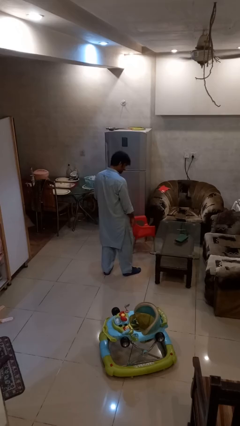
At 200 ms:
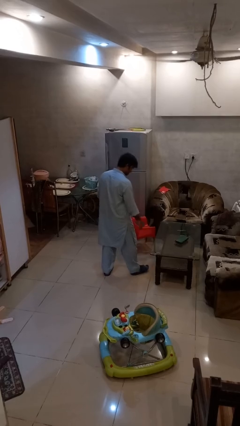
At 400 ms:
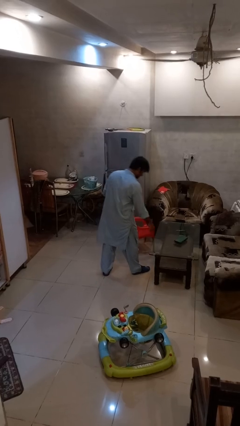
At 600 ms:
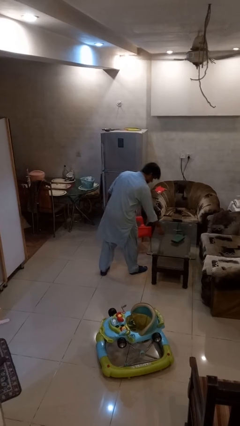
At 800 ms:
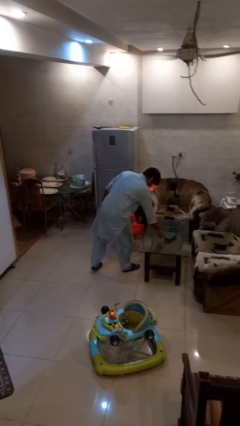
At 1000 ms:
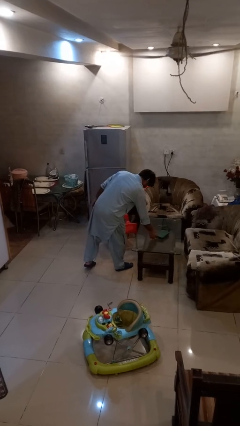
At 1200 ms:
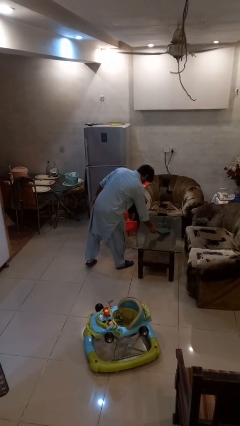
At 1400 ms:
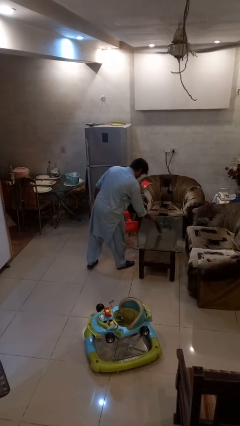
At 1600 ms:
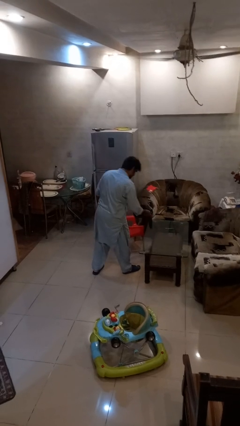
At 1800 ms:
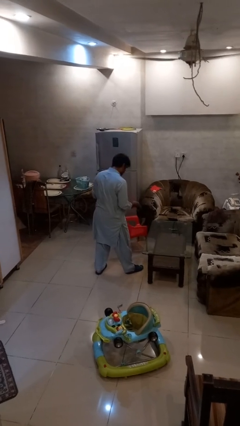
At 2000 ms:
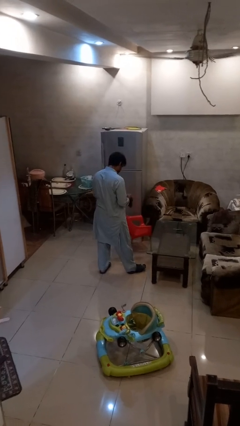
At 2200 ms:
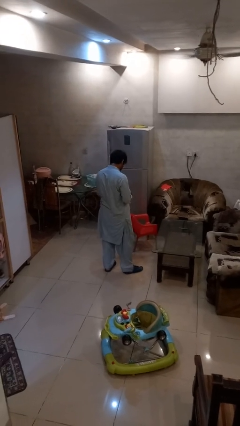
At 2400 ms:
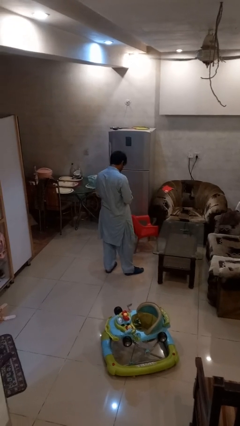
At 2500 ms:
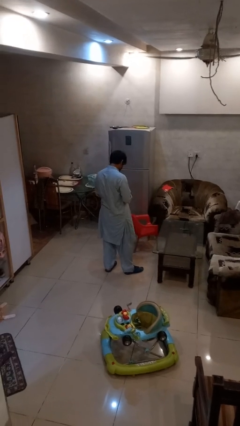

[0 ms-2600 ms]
person picks up object from table

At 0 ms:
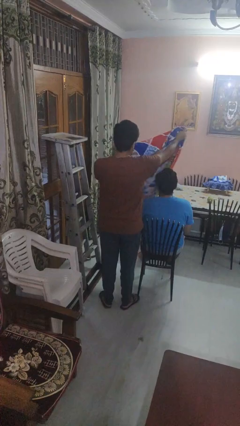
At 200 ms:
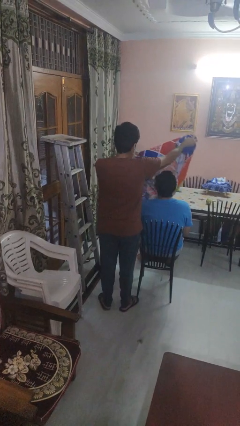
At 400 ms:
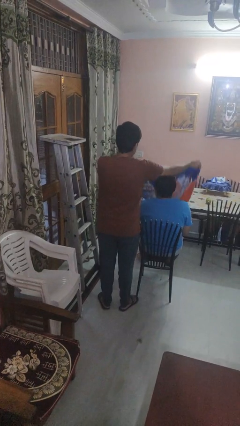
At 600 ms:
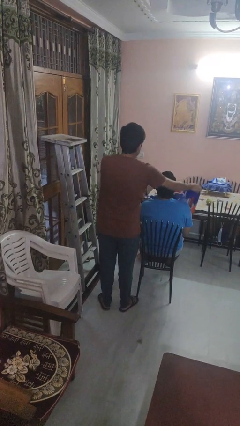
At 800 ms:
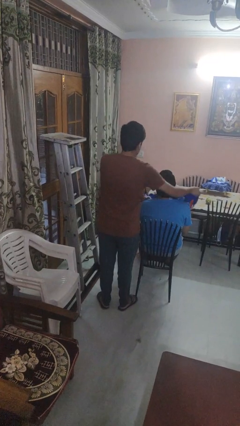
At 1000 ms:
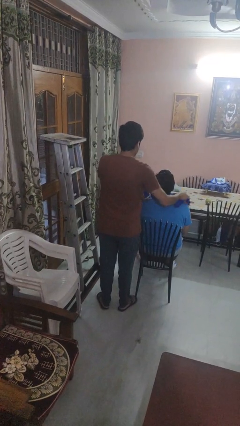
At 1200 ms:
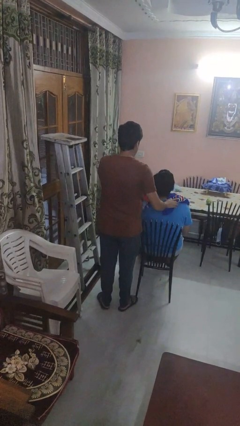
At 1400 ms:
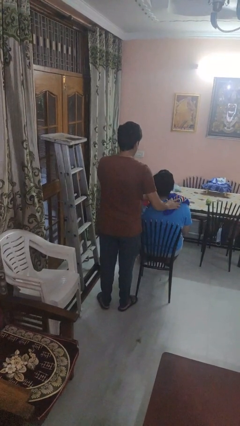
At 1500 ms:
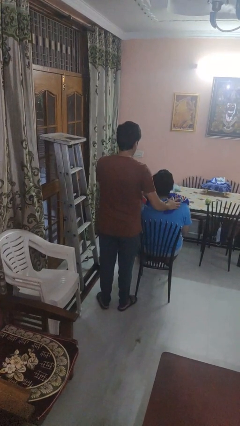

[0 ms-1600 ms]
person covers friend with blanket

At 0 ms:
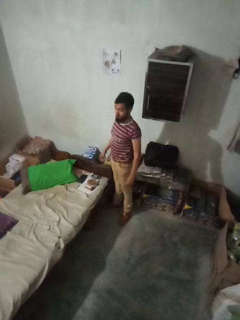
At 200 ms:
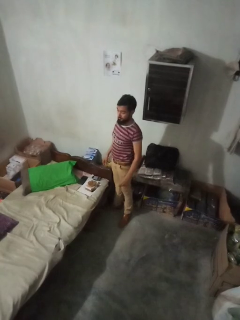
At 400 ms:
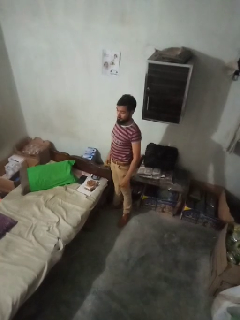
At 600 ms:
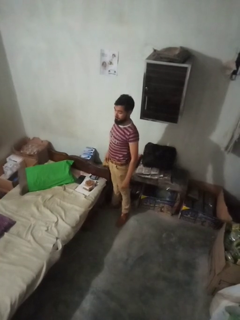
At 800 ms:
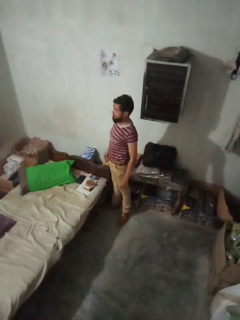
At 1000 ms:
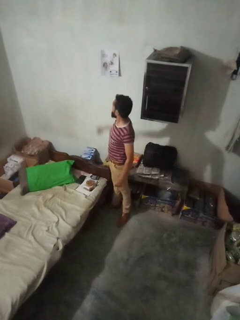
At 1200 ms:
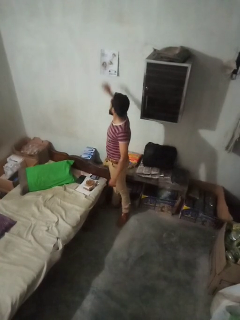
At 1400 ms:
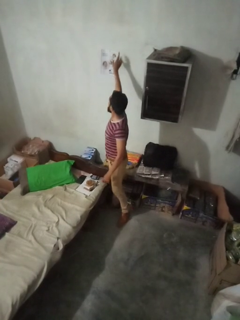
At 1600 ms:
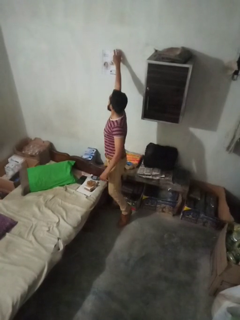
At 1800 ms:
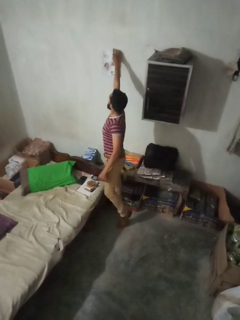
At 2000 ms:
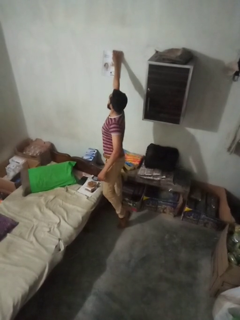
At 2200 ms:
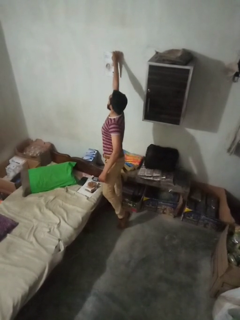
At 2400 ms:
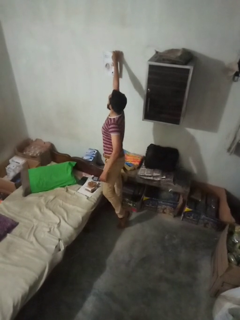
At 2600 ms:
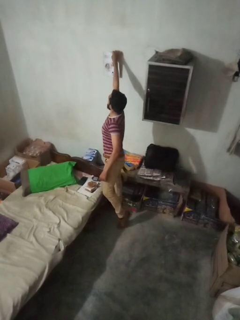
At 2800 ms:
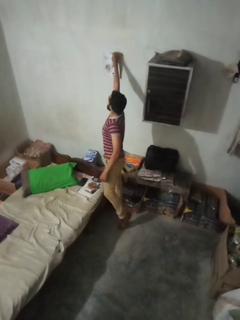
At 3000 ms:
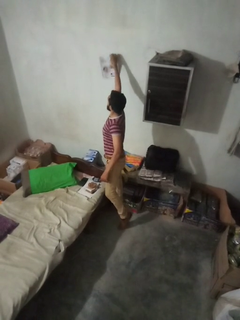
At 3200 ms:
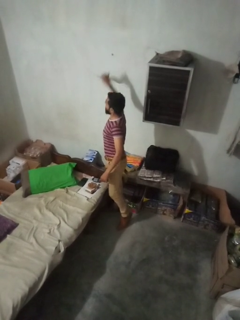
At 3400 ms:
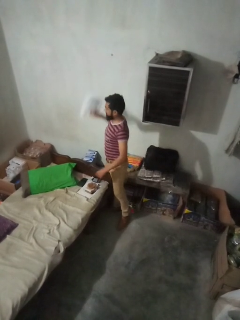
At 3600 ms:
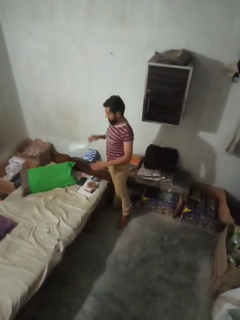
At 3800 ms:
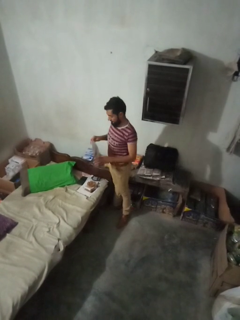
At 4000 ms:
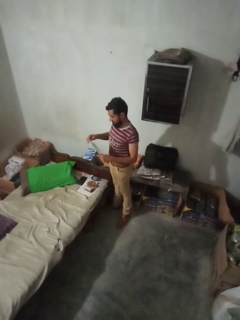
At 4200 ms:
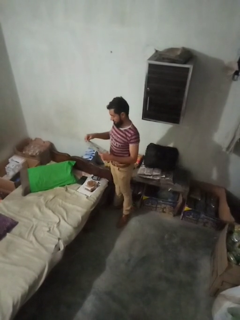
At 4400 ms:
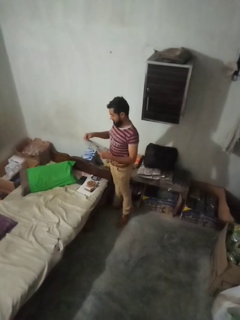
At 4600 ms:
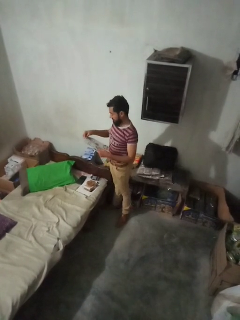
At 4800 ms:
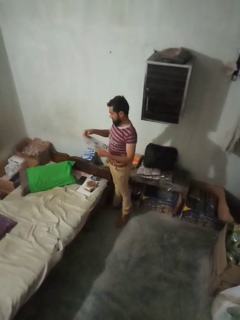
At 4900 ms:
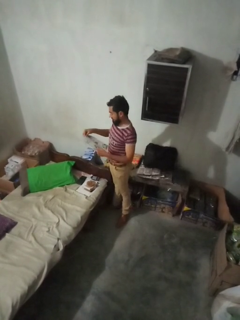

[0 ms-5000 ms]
person takes down picture frame

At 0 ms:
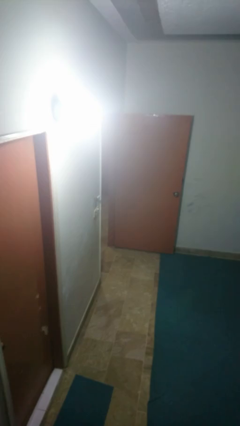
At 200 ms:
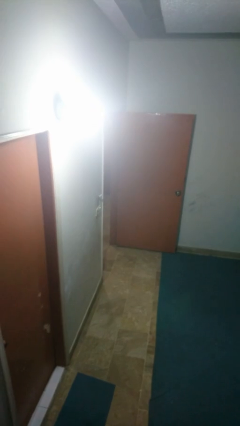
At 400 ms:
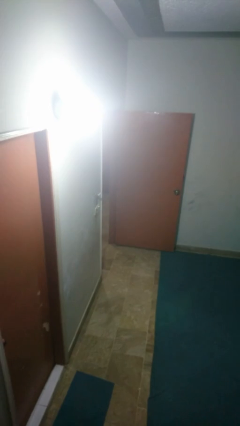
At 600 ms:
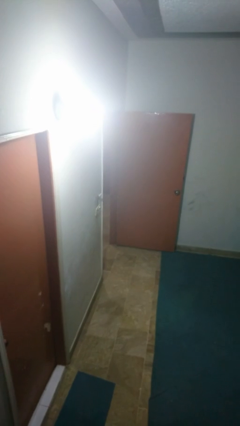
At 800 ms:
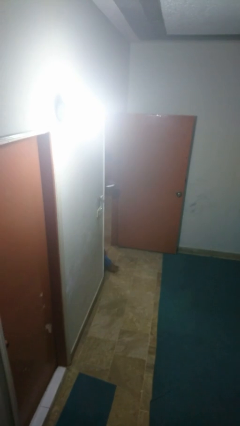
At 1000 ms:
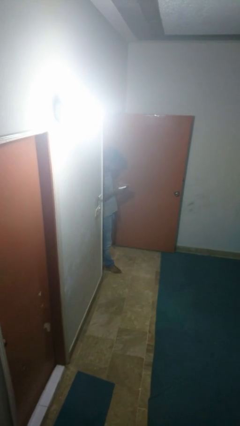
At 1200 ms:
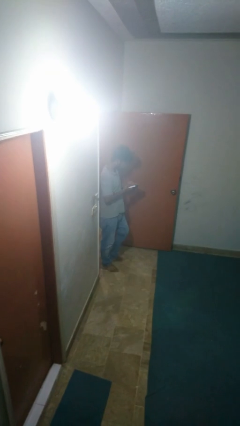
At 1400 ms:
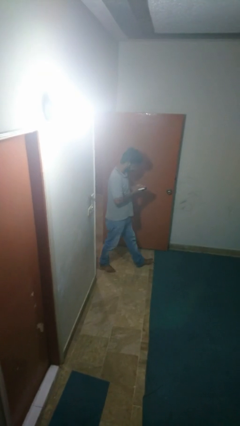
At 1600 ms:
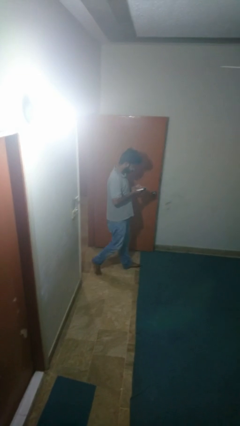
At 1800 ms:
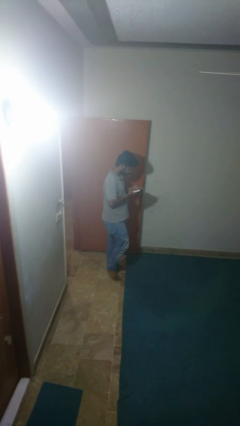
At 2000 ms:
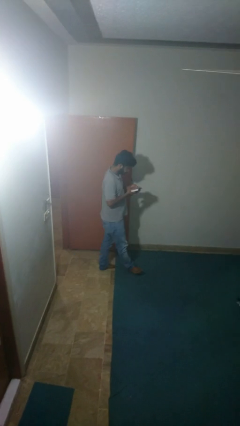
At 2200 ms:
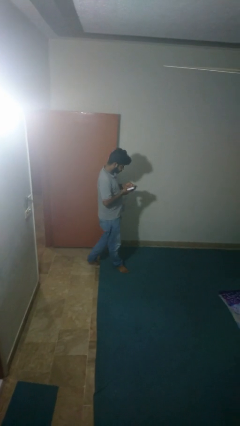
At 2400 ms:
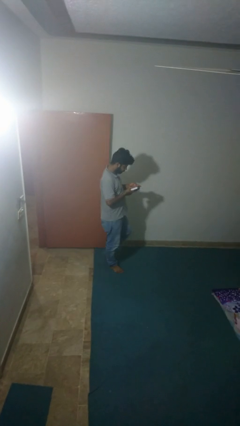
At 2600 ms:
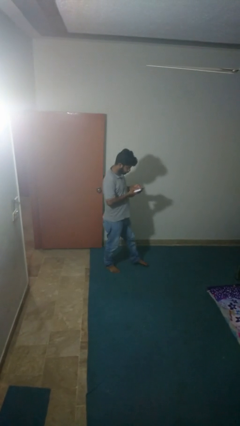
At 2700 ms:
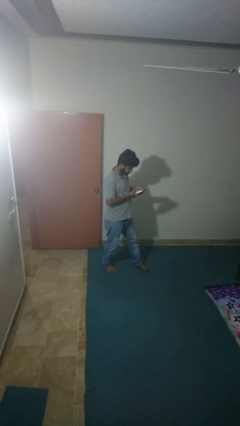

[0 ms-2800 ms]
person enters scene through structure

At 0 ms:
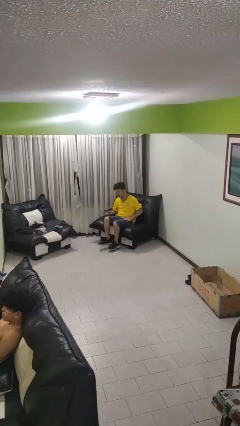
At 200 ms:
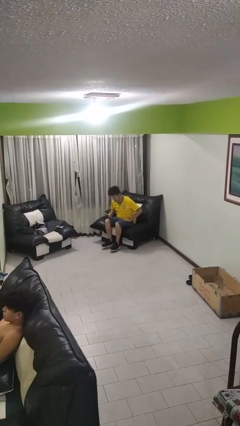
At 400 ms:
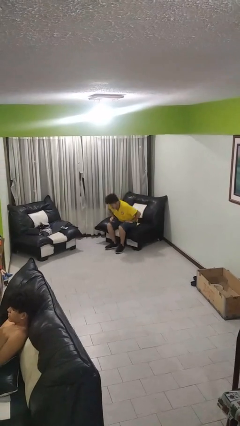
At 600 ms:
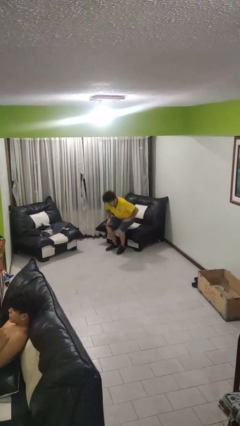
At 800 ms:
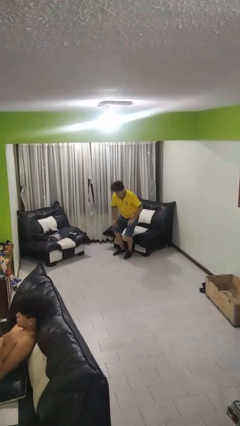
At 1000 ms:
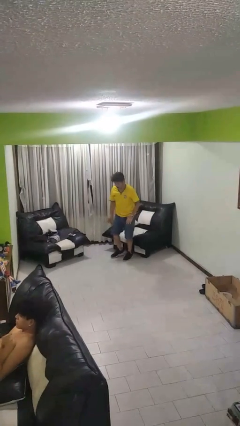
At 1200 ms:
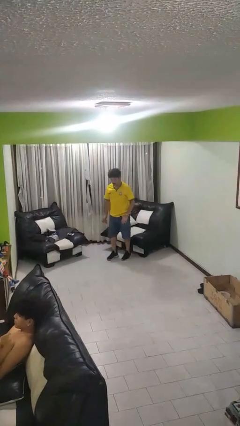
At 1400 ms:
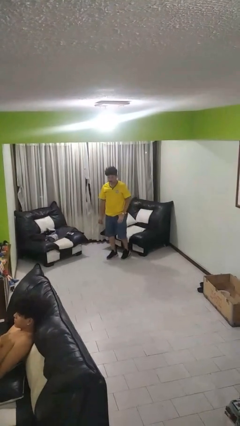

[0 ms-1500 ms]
person stands up

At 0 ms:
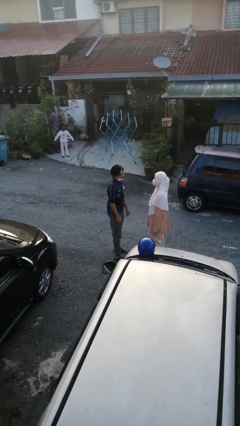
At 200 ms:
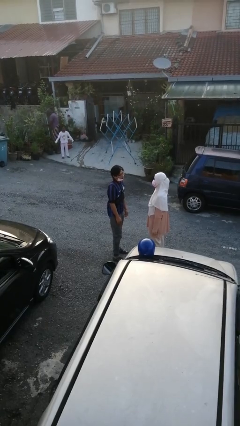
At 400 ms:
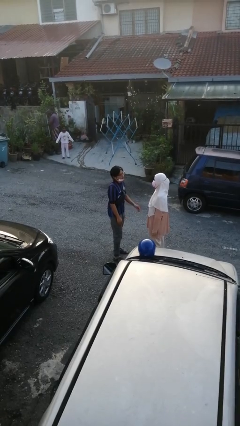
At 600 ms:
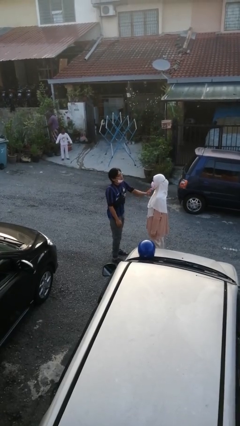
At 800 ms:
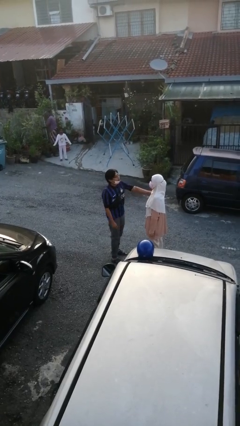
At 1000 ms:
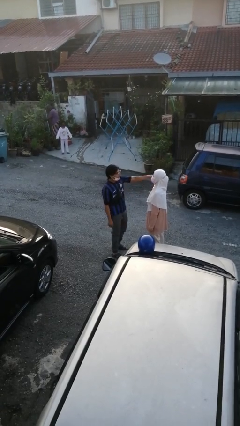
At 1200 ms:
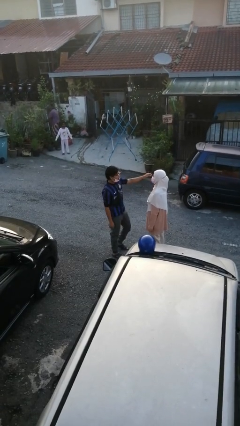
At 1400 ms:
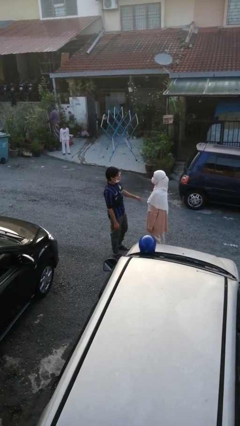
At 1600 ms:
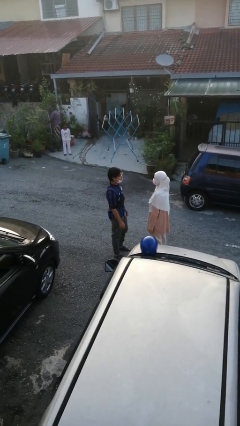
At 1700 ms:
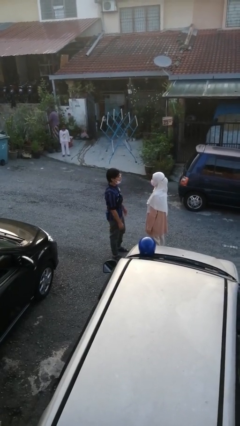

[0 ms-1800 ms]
person shoves person

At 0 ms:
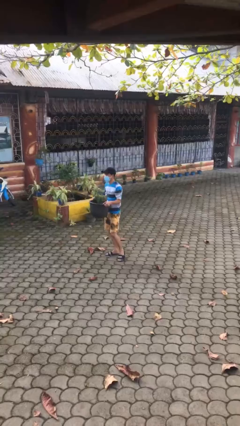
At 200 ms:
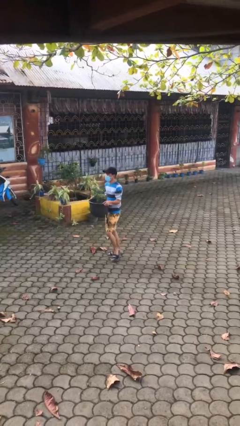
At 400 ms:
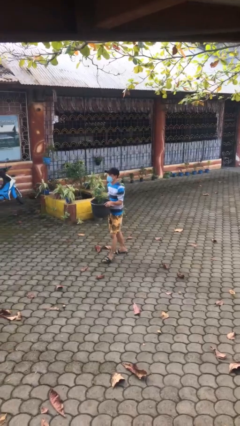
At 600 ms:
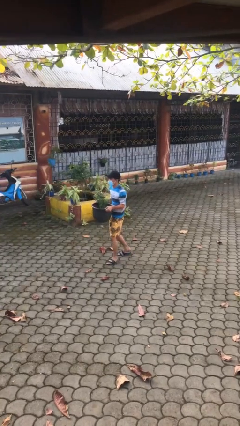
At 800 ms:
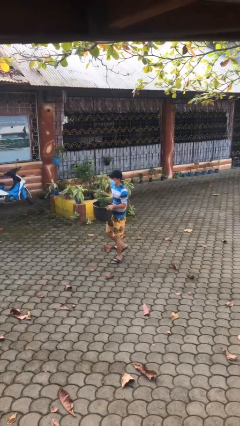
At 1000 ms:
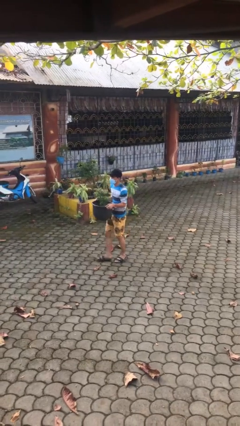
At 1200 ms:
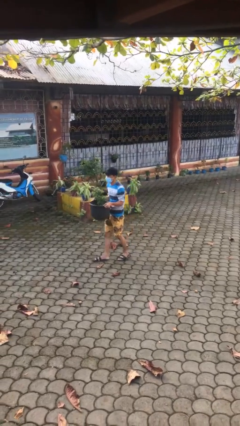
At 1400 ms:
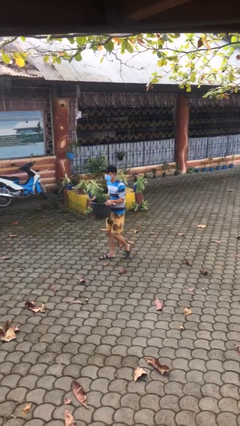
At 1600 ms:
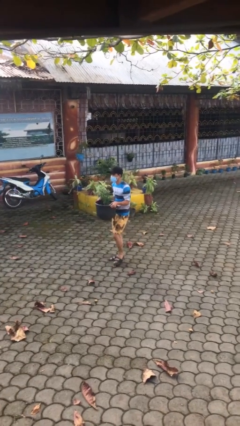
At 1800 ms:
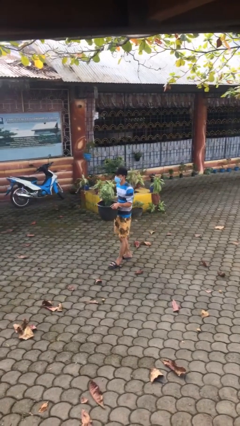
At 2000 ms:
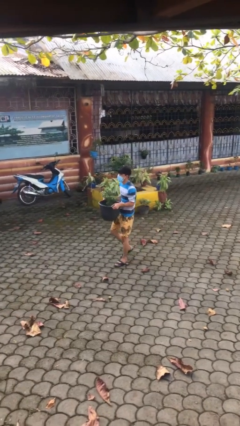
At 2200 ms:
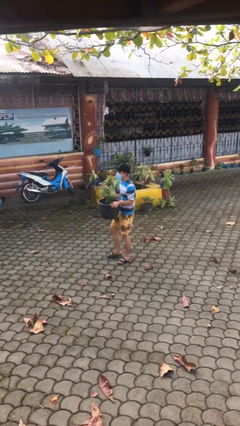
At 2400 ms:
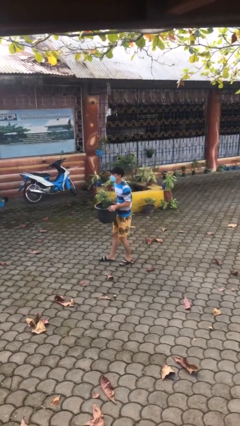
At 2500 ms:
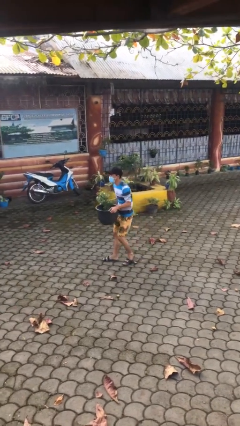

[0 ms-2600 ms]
person carries heavy object

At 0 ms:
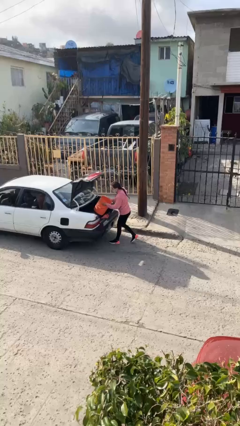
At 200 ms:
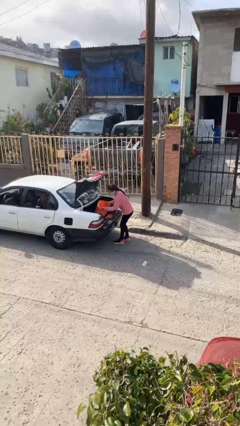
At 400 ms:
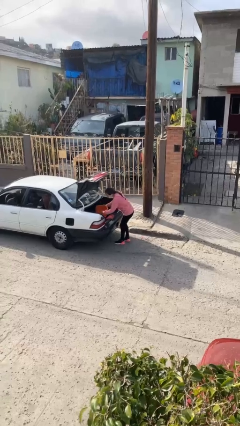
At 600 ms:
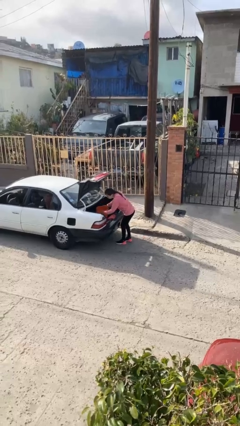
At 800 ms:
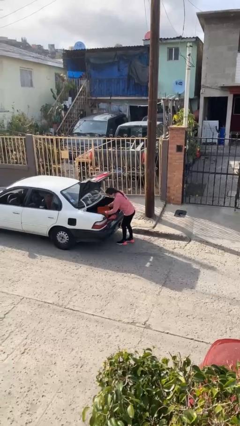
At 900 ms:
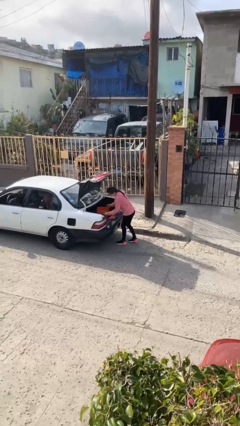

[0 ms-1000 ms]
person loads car
